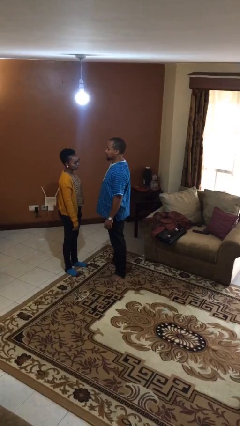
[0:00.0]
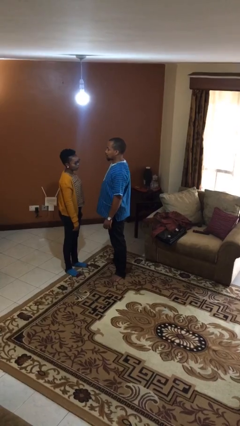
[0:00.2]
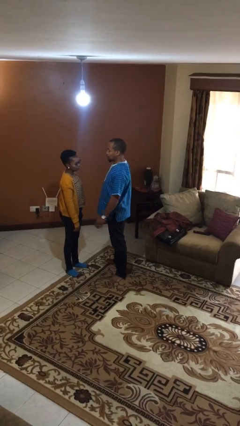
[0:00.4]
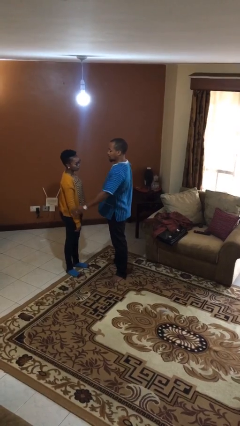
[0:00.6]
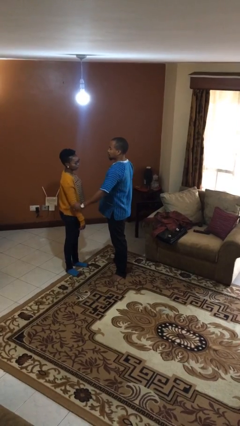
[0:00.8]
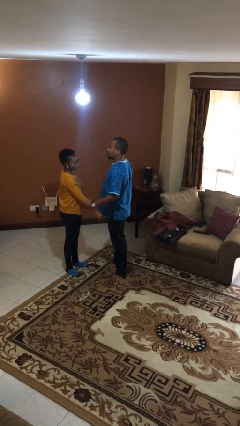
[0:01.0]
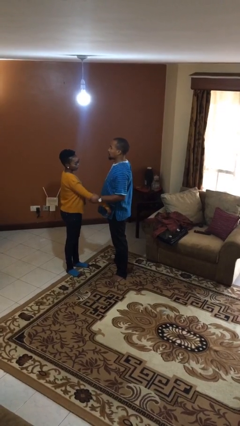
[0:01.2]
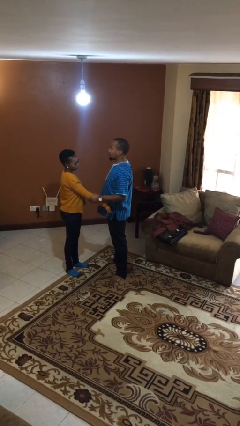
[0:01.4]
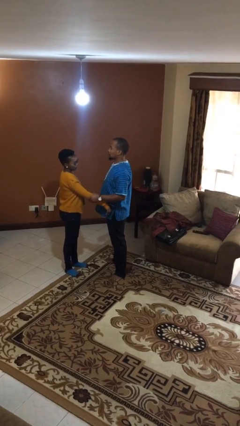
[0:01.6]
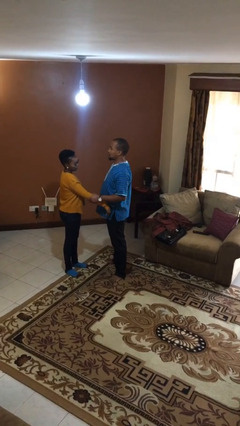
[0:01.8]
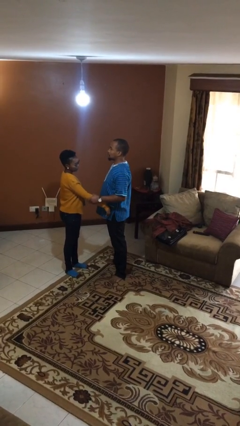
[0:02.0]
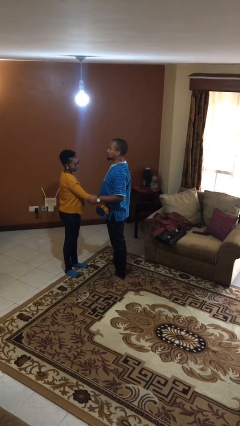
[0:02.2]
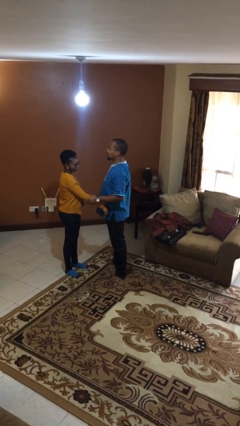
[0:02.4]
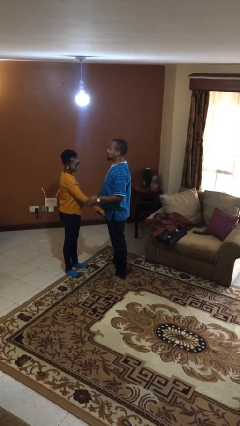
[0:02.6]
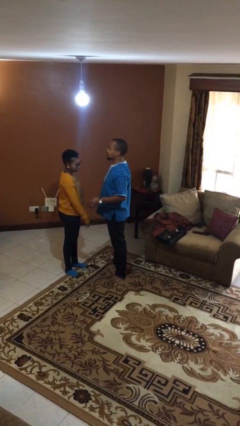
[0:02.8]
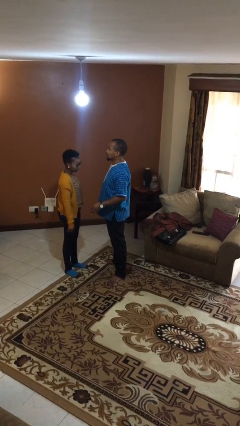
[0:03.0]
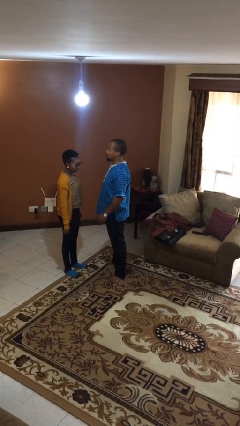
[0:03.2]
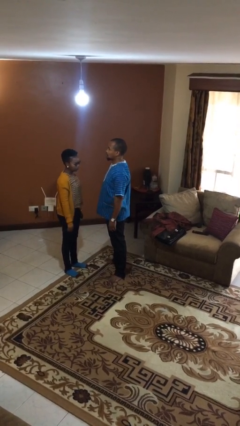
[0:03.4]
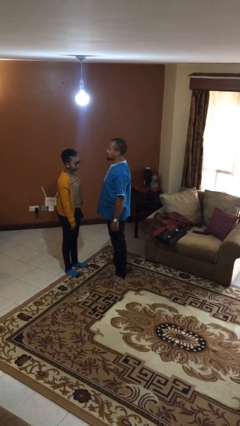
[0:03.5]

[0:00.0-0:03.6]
person grabs person by forearm

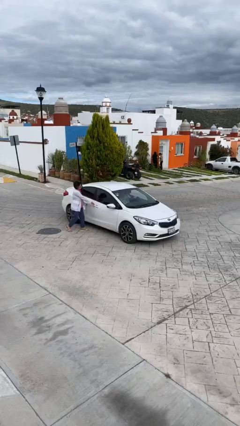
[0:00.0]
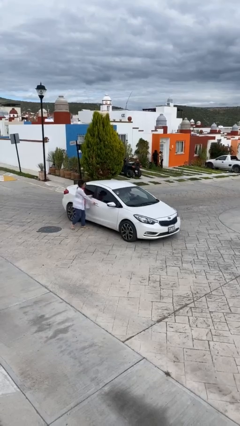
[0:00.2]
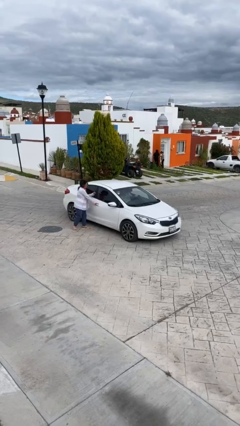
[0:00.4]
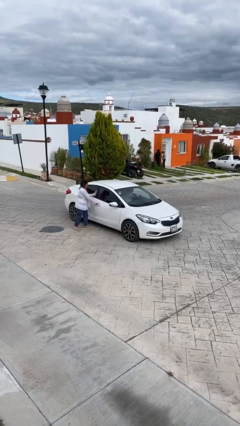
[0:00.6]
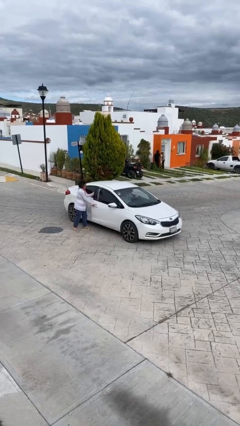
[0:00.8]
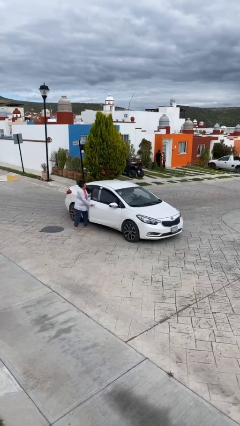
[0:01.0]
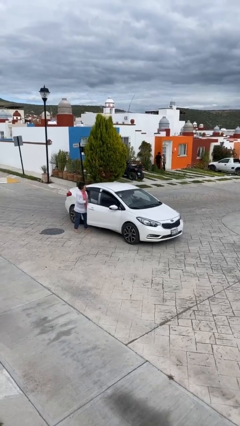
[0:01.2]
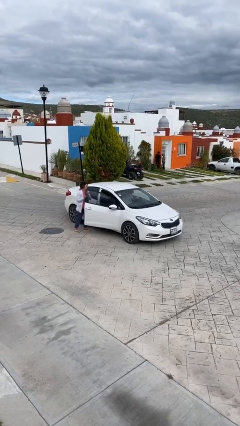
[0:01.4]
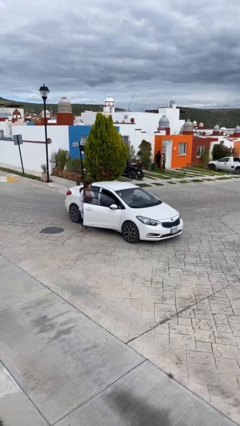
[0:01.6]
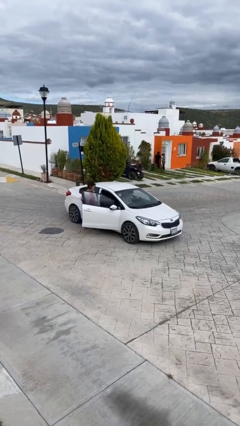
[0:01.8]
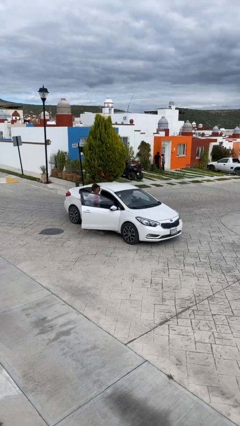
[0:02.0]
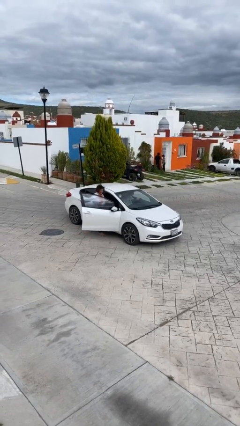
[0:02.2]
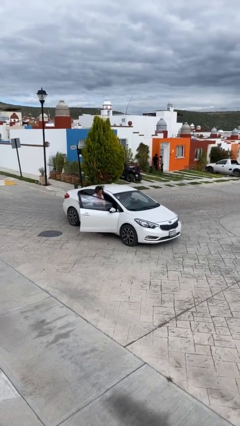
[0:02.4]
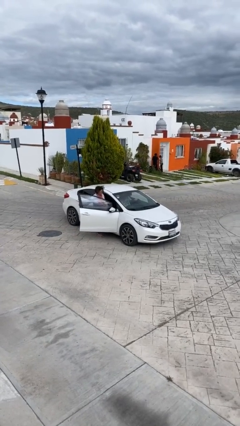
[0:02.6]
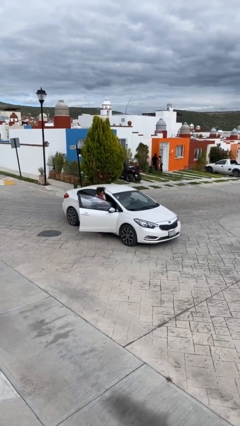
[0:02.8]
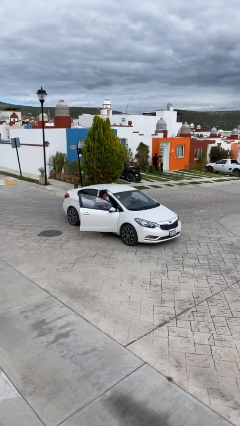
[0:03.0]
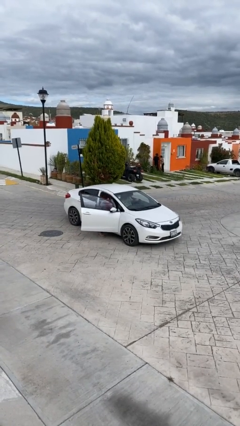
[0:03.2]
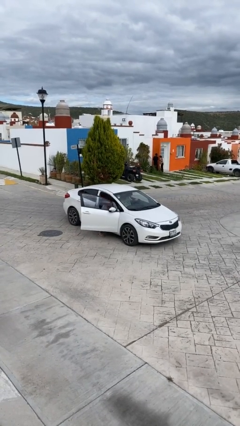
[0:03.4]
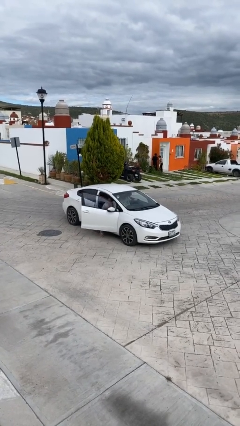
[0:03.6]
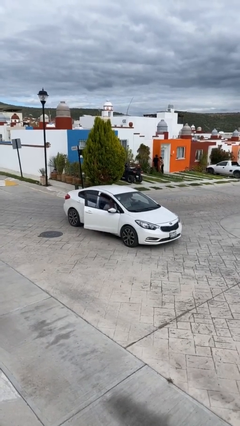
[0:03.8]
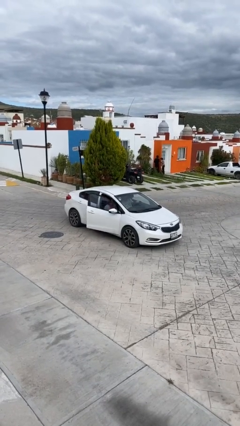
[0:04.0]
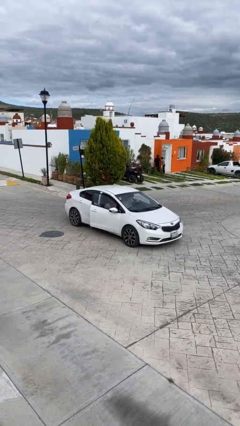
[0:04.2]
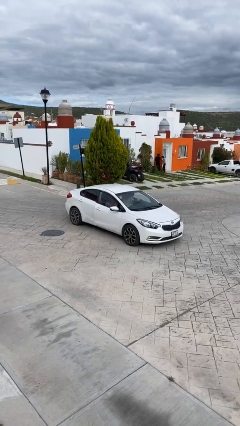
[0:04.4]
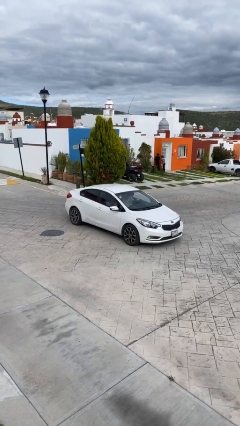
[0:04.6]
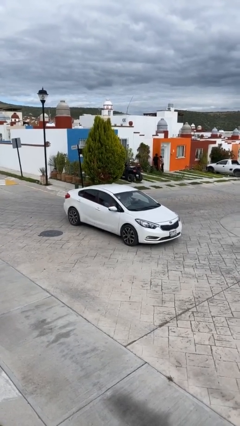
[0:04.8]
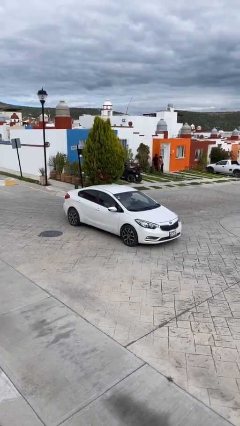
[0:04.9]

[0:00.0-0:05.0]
car picks up person

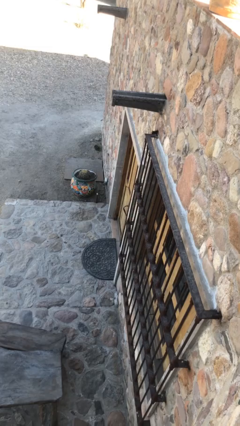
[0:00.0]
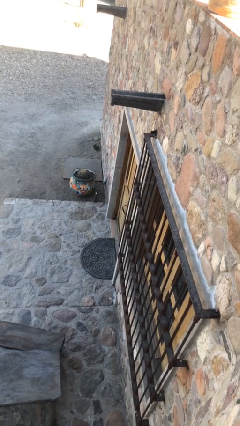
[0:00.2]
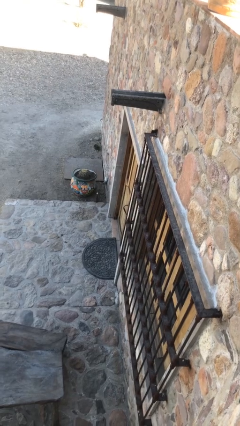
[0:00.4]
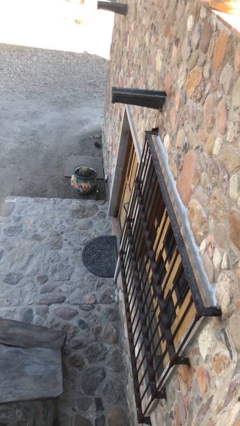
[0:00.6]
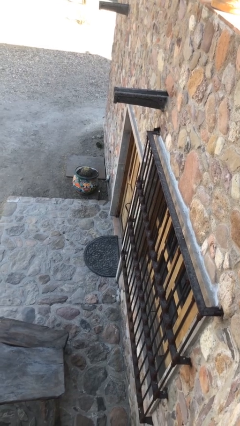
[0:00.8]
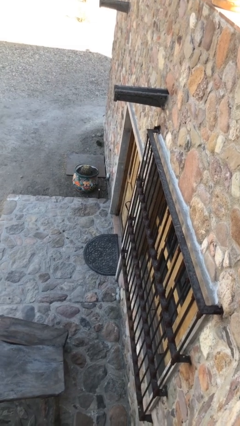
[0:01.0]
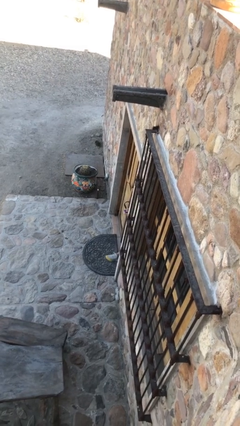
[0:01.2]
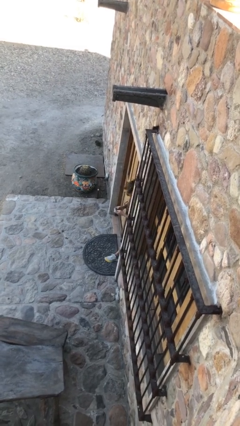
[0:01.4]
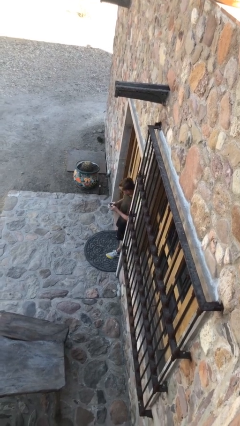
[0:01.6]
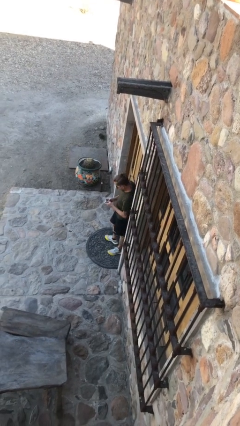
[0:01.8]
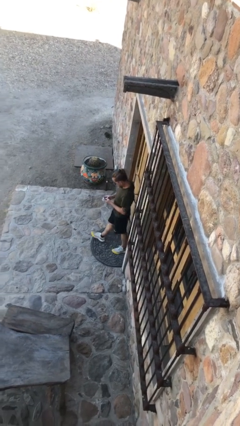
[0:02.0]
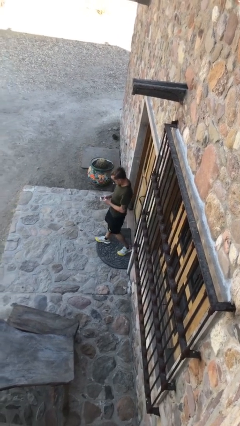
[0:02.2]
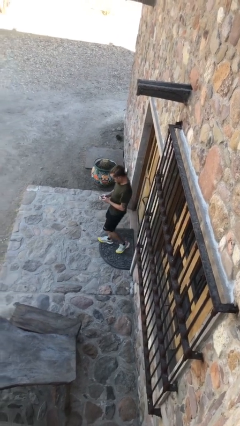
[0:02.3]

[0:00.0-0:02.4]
person enters scene through structure

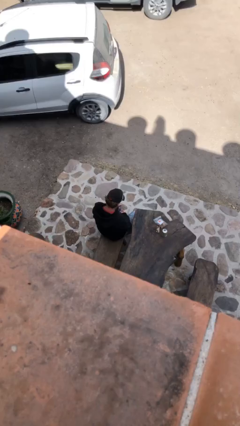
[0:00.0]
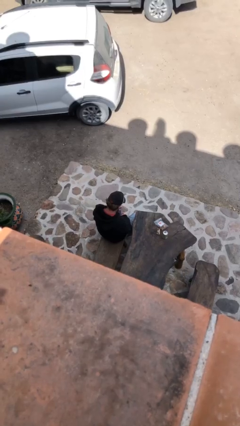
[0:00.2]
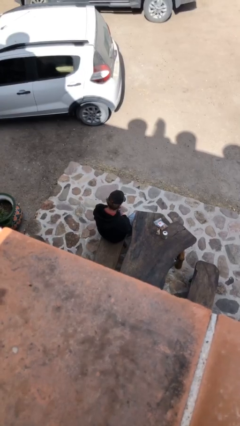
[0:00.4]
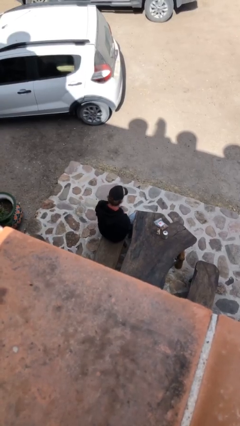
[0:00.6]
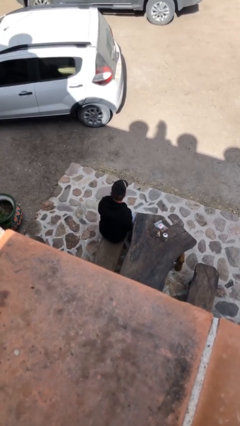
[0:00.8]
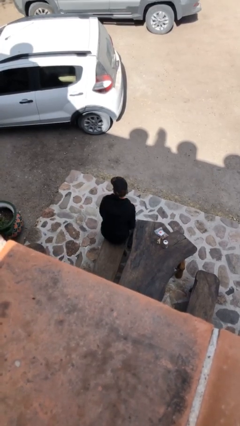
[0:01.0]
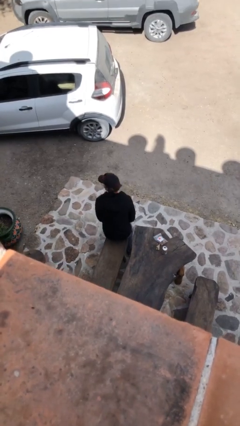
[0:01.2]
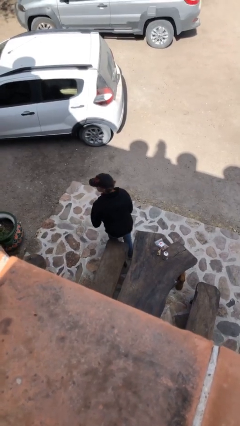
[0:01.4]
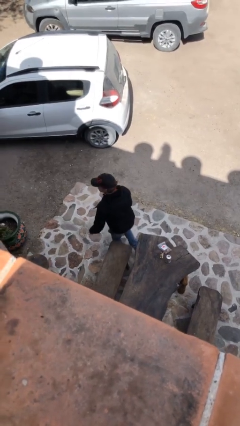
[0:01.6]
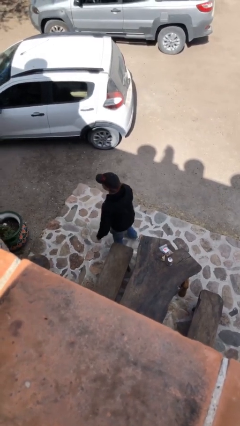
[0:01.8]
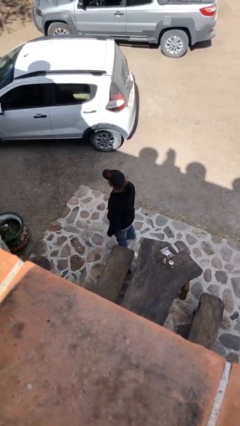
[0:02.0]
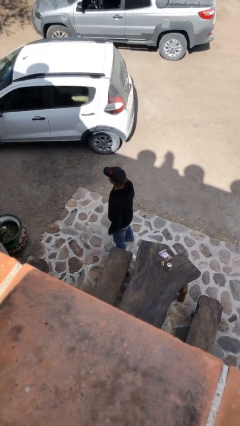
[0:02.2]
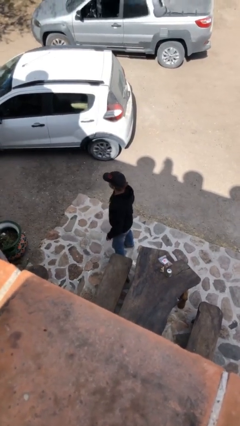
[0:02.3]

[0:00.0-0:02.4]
person stands up

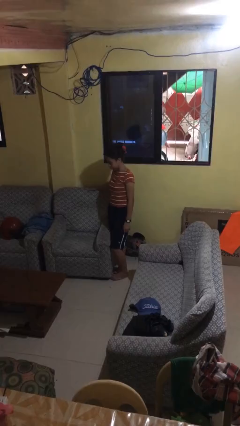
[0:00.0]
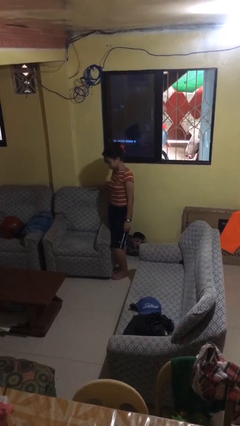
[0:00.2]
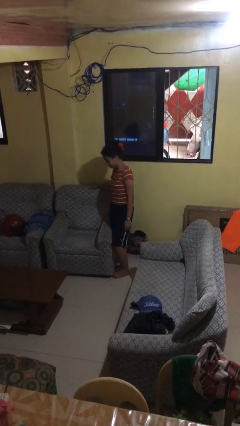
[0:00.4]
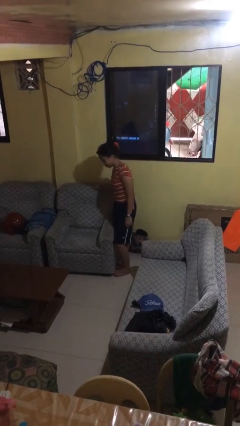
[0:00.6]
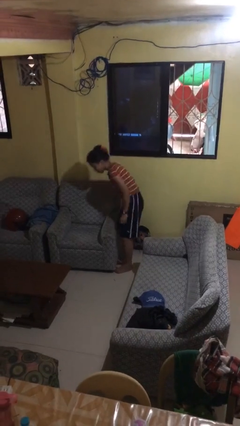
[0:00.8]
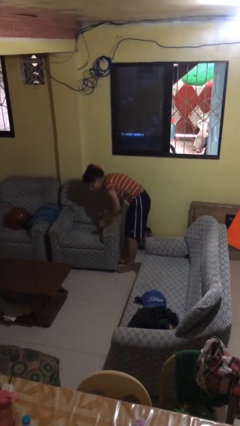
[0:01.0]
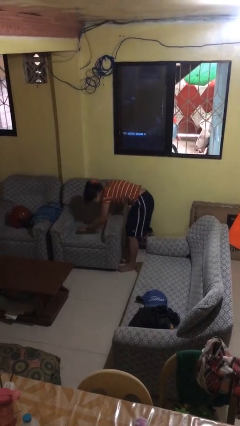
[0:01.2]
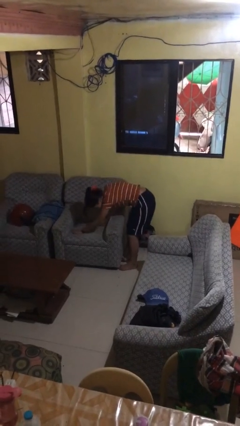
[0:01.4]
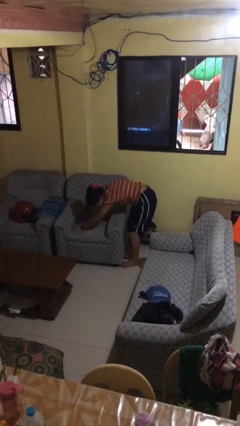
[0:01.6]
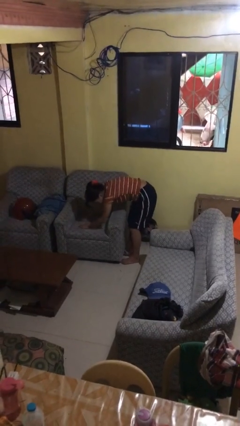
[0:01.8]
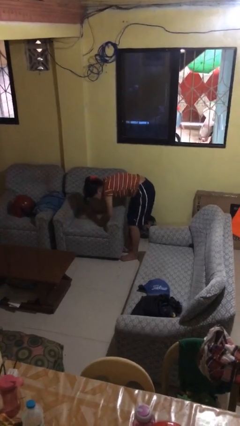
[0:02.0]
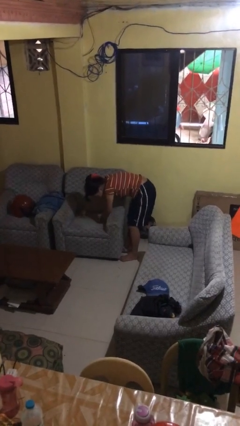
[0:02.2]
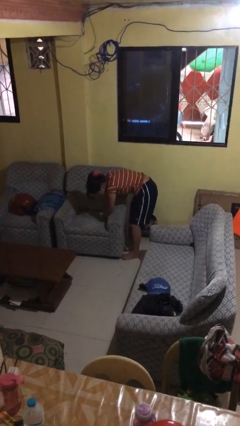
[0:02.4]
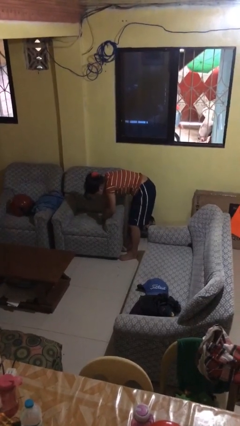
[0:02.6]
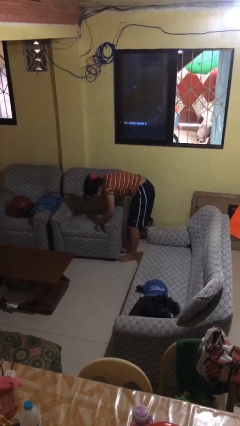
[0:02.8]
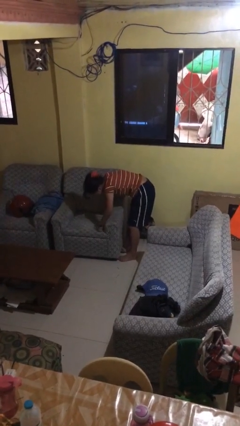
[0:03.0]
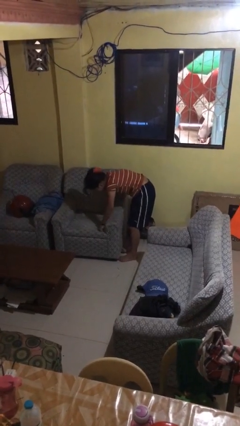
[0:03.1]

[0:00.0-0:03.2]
person searches in couch

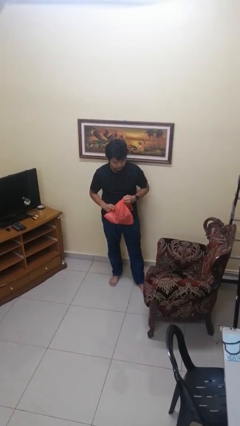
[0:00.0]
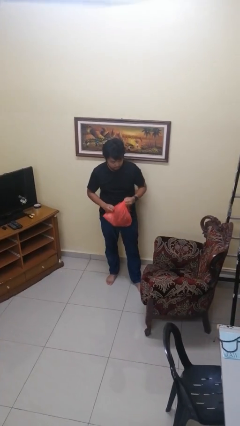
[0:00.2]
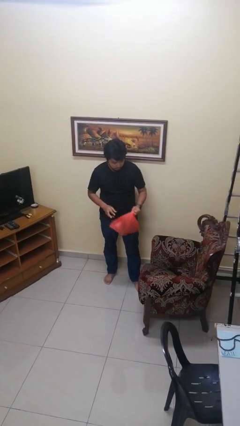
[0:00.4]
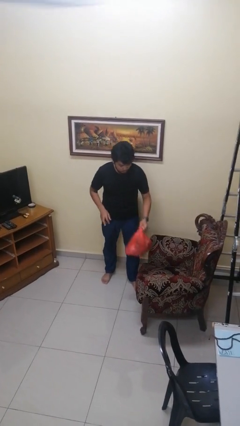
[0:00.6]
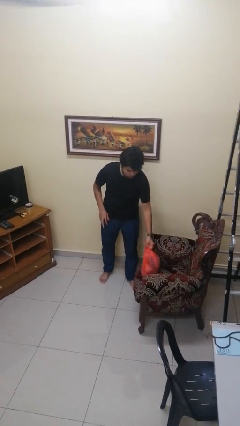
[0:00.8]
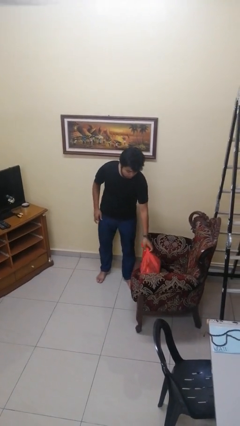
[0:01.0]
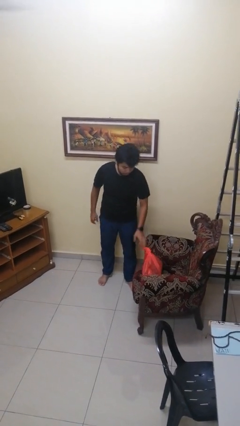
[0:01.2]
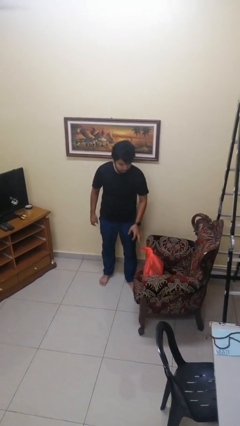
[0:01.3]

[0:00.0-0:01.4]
person puts down object on couch
